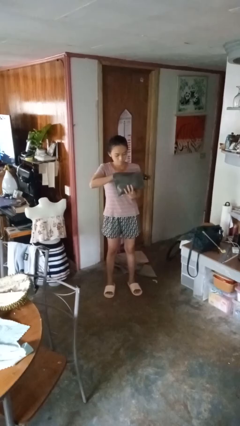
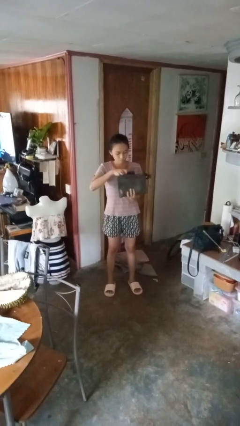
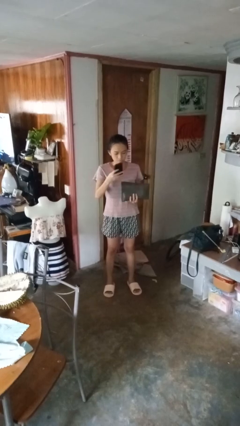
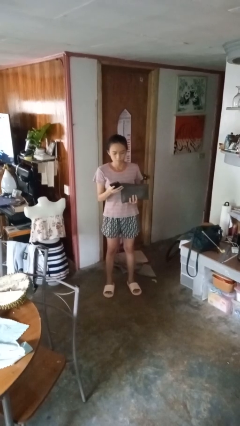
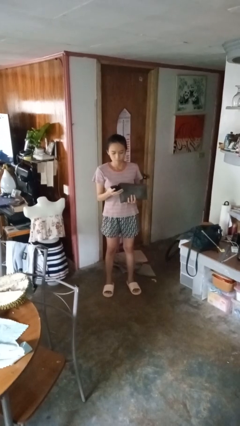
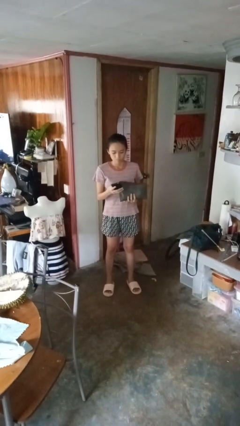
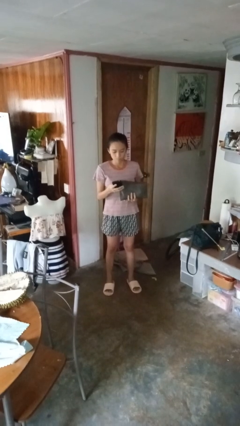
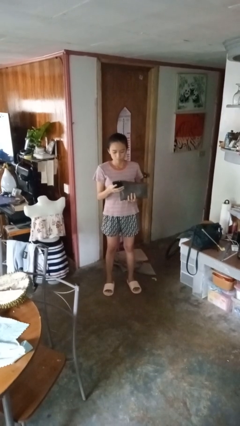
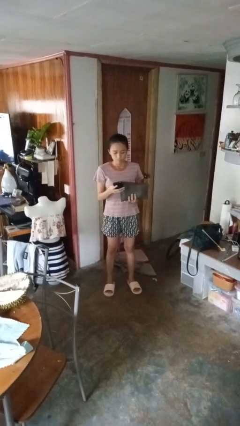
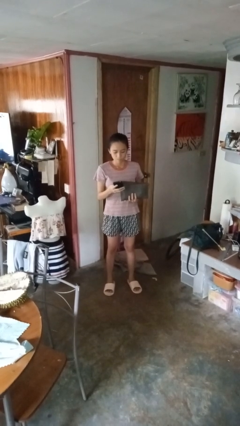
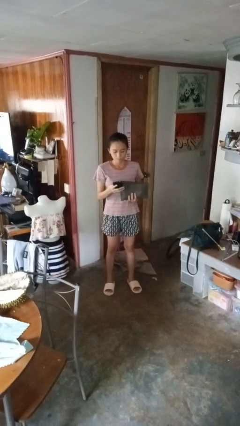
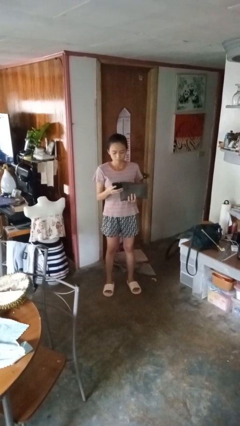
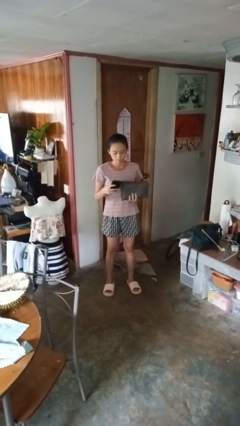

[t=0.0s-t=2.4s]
person takes object from purse

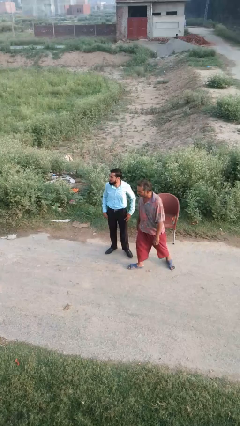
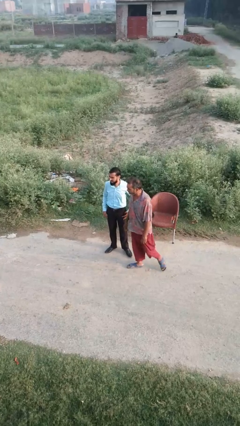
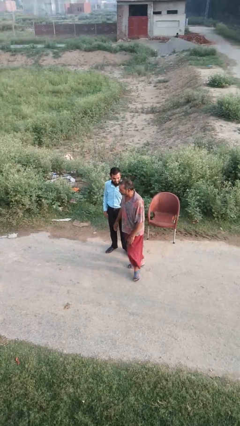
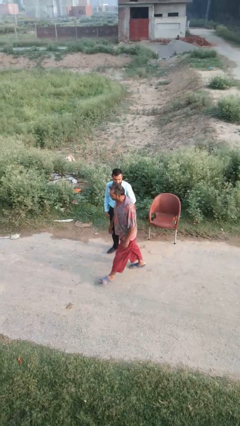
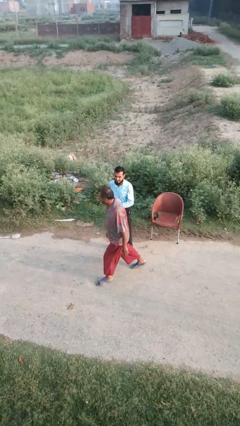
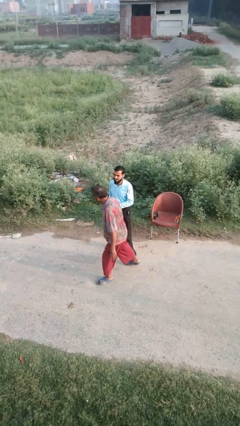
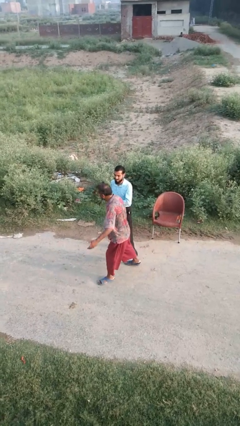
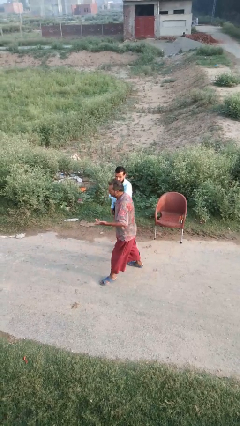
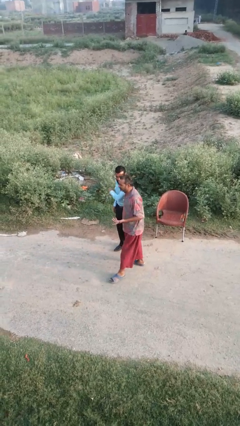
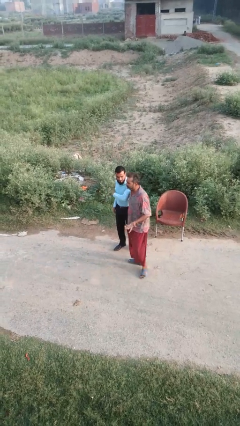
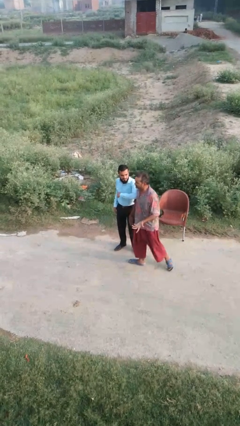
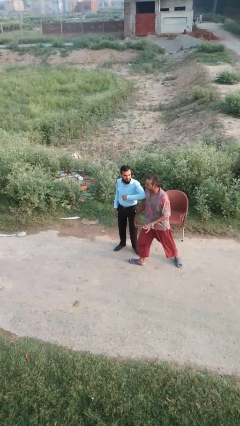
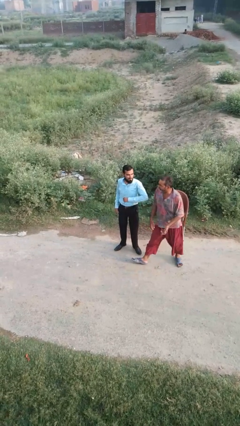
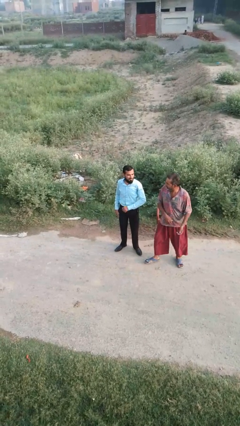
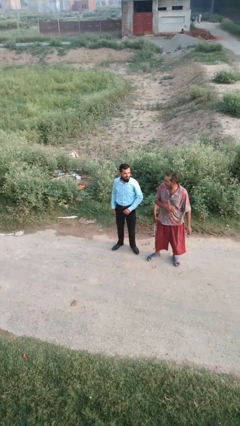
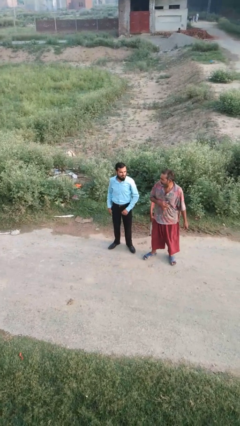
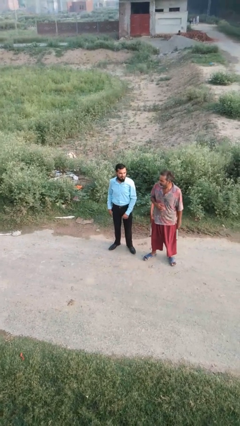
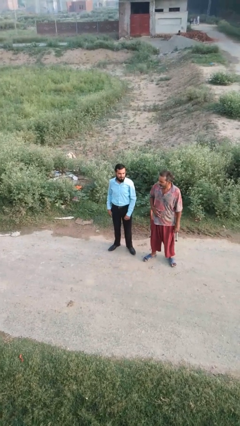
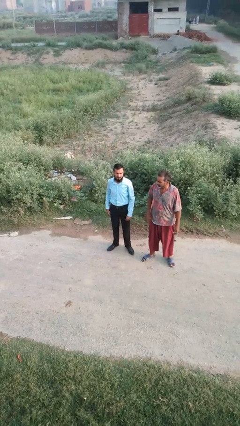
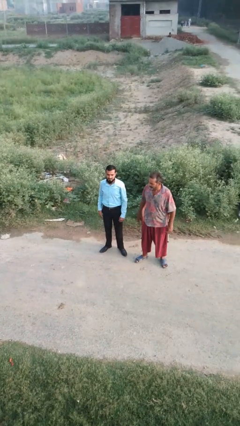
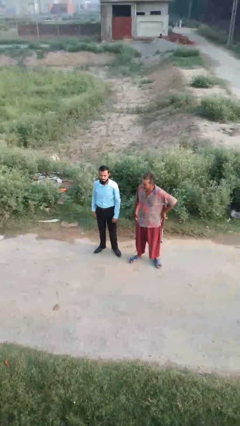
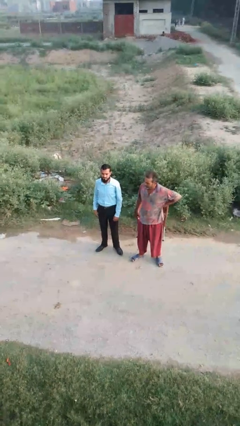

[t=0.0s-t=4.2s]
person nudges person with elbow

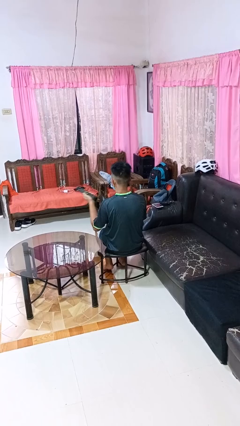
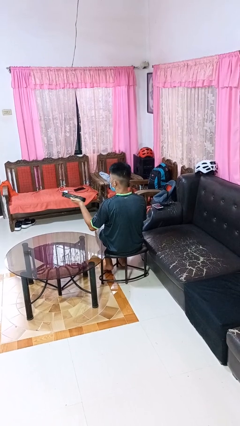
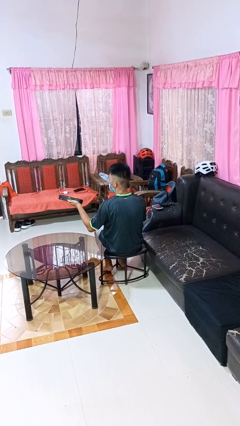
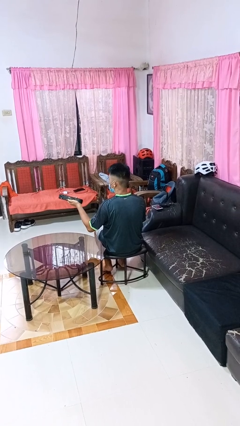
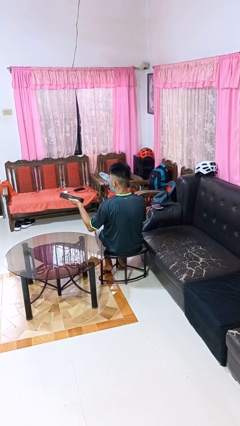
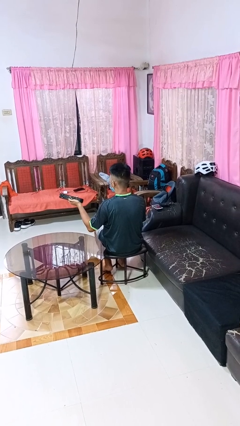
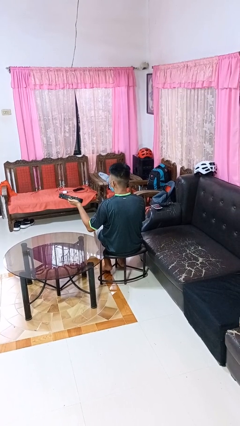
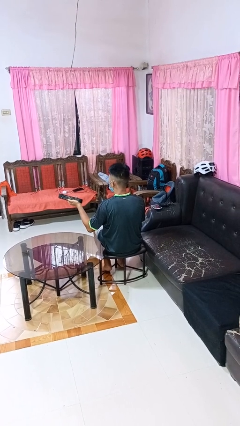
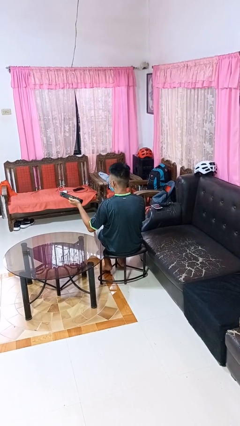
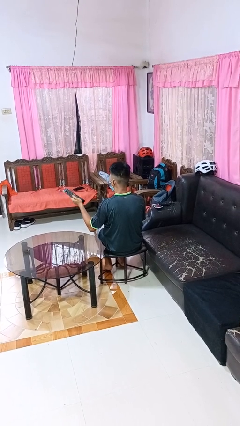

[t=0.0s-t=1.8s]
person uses television remote

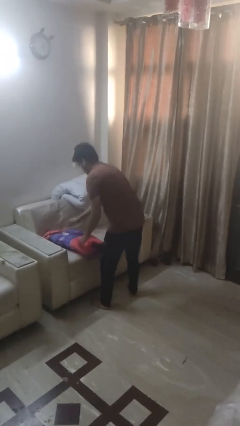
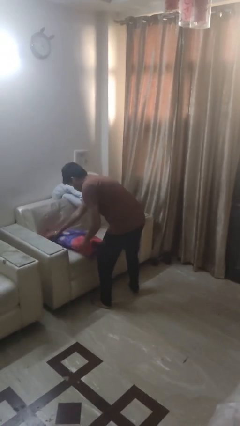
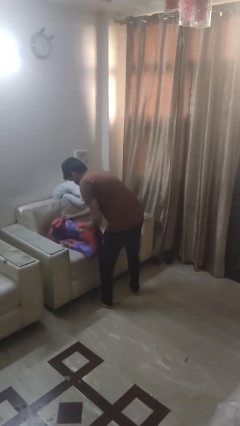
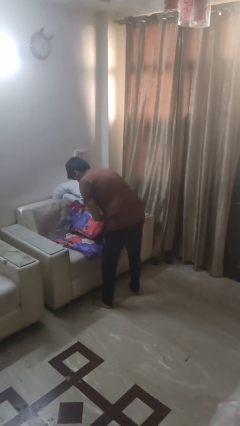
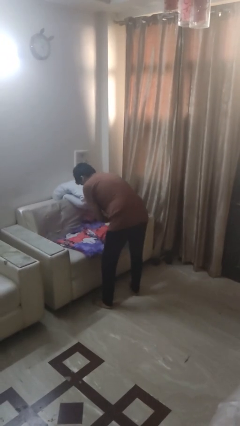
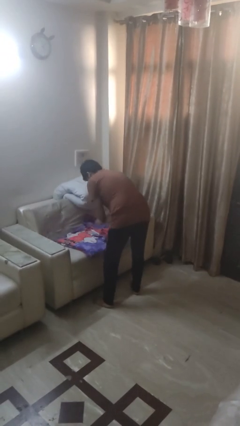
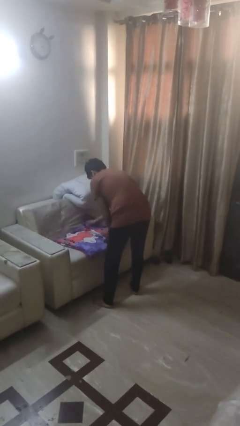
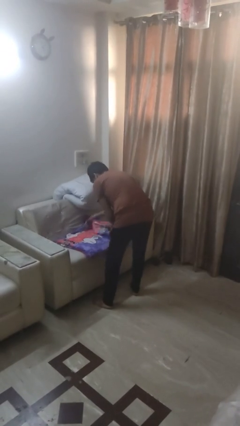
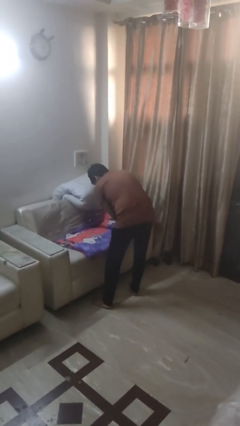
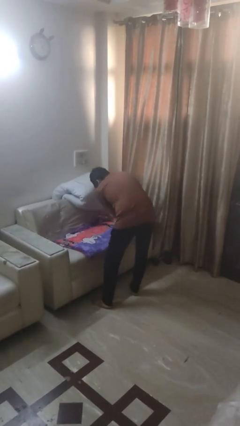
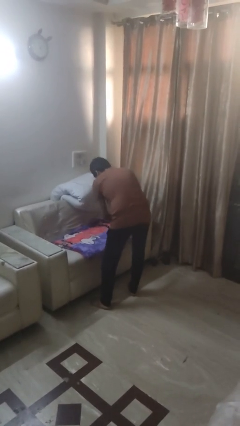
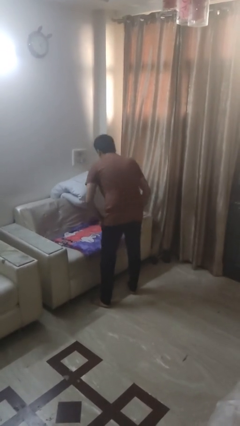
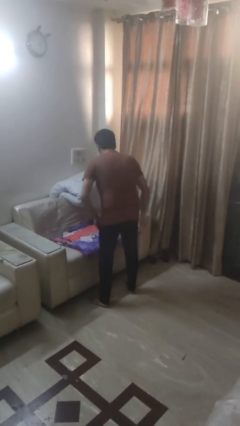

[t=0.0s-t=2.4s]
person unfolds blanket

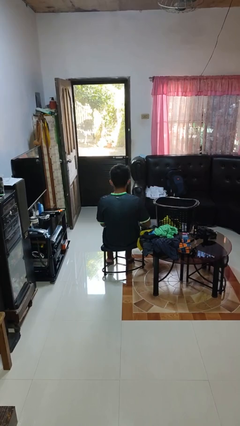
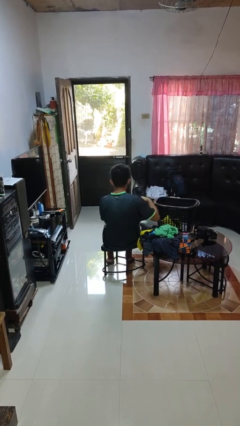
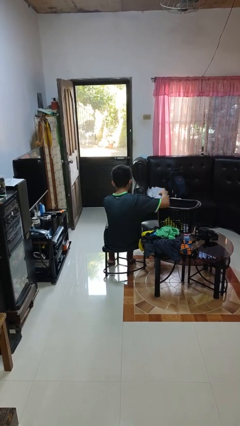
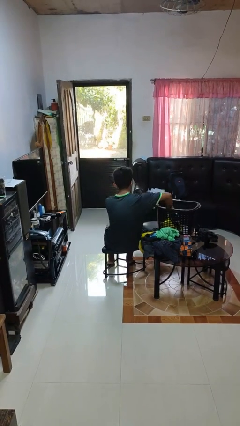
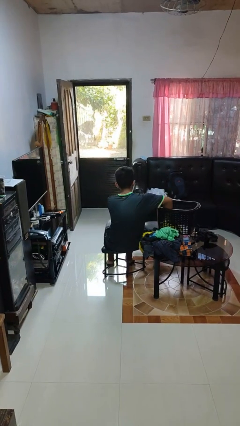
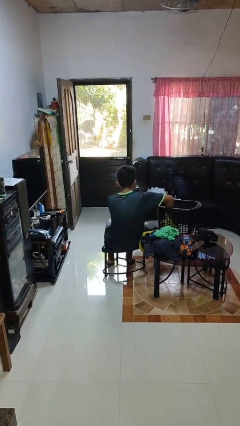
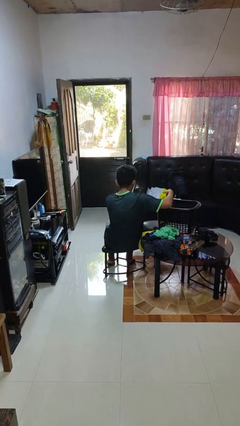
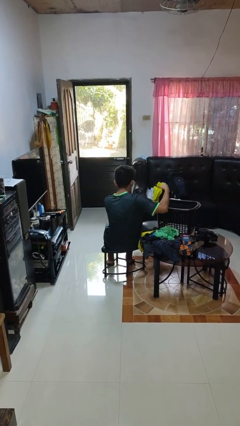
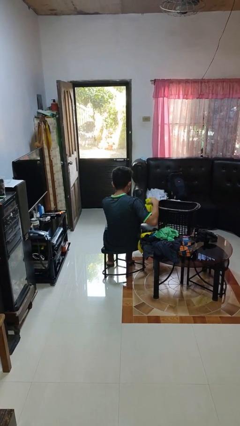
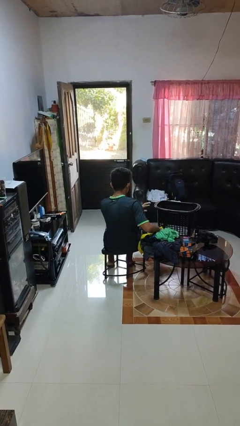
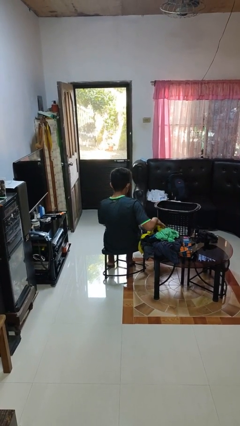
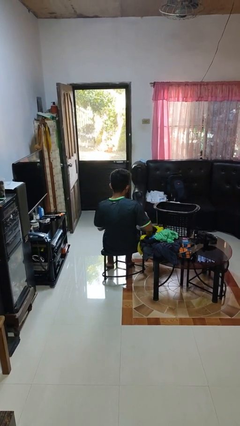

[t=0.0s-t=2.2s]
person takes object from basket

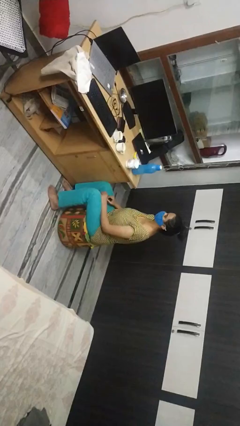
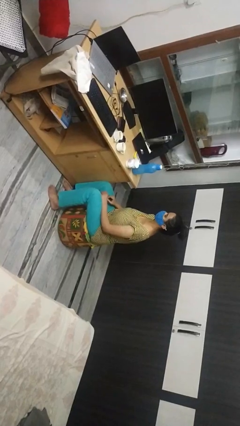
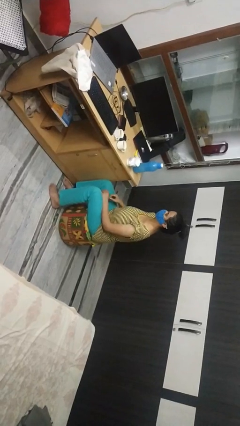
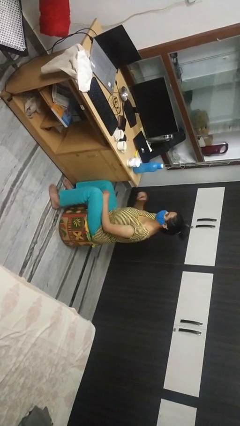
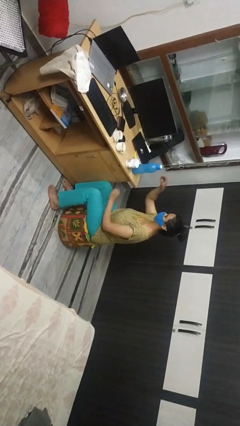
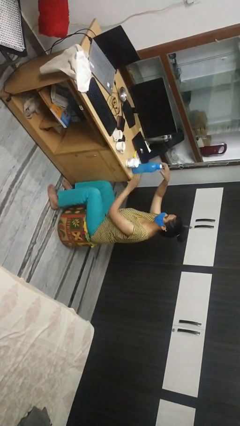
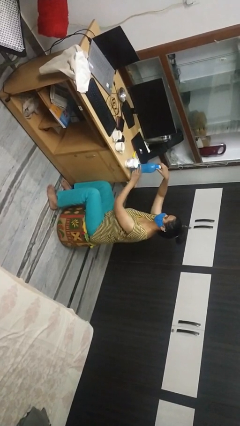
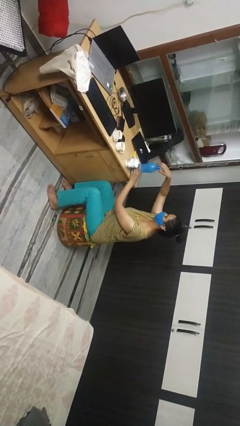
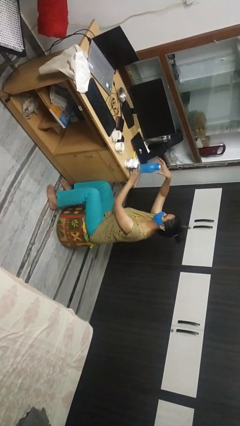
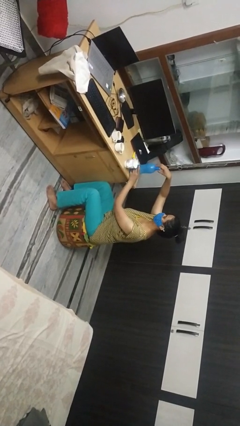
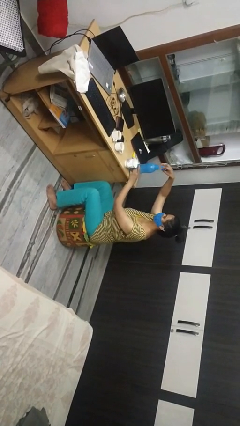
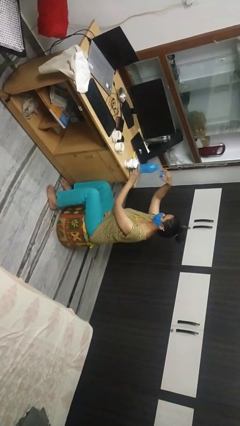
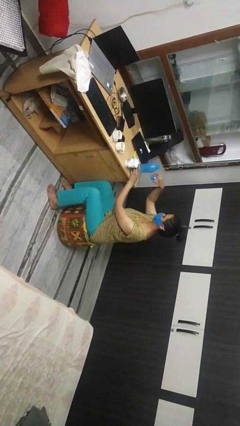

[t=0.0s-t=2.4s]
person unscrews lid from bottle

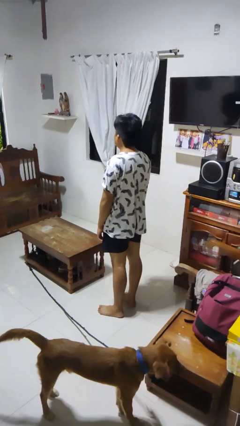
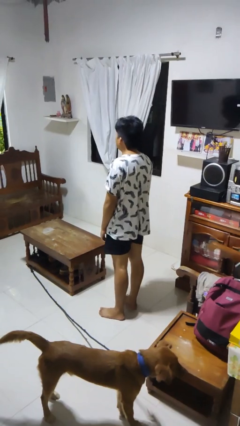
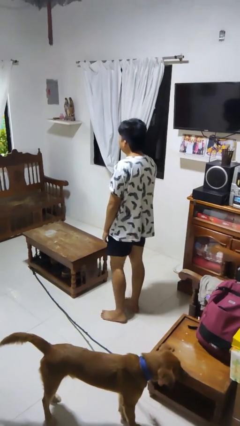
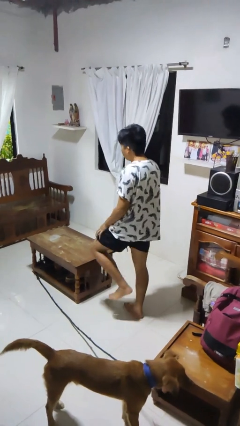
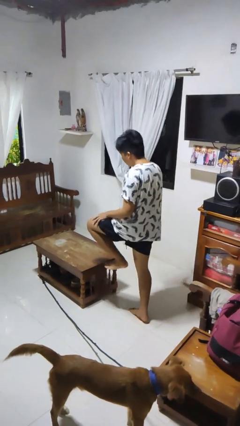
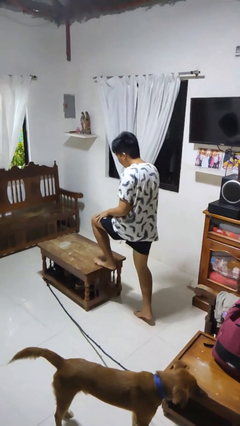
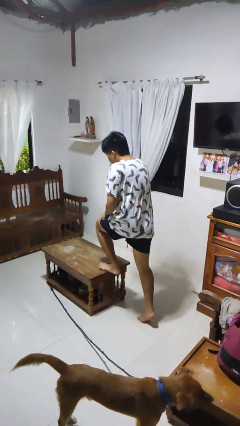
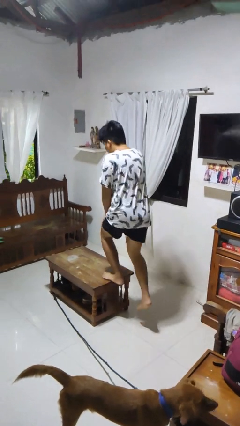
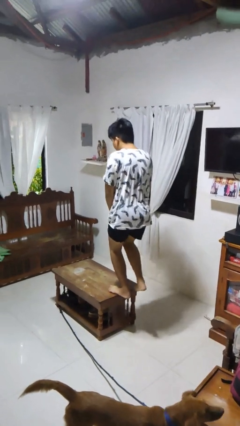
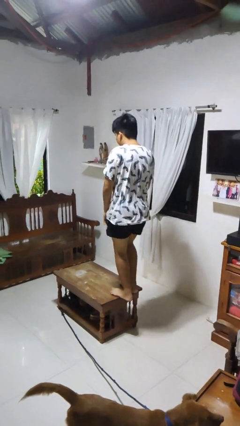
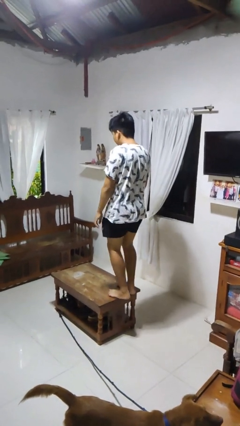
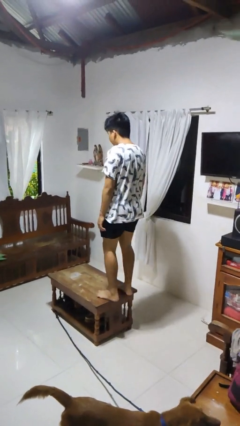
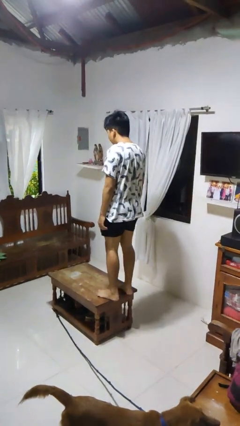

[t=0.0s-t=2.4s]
person climbs on table
